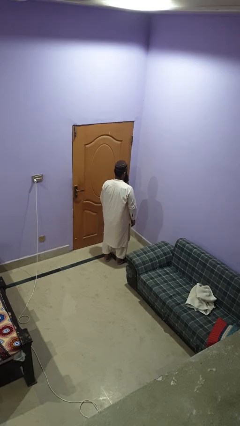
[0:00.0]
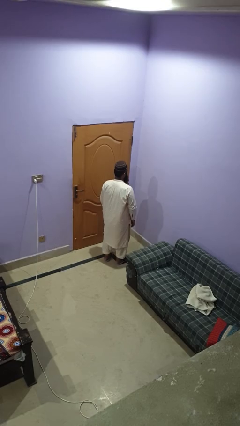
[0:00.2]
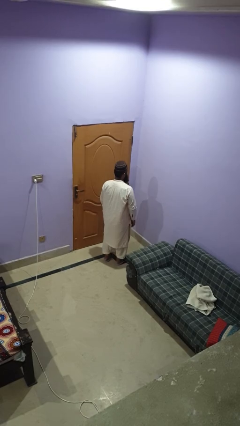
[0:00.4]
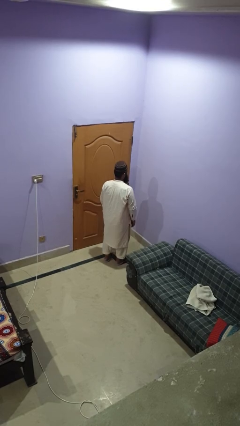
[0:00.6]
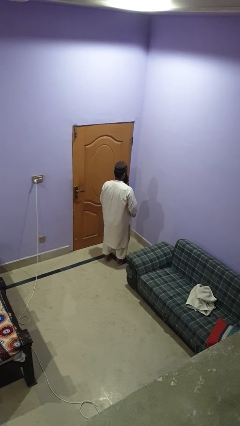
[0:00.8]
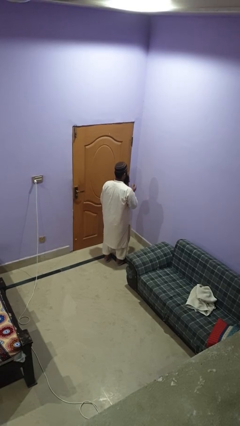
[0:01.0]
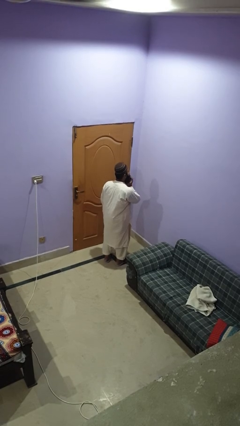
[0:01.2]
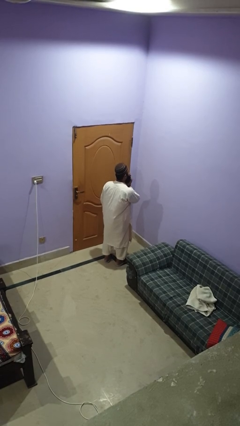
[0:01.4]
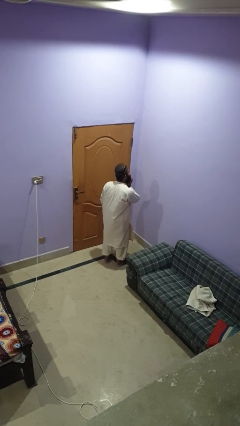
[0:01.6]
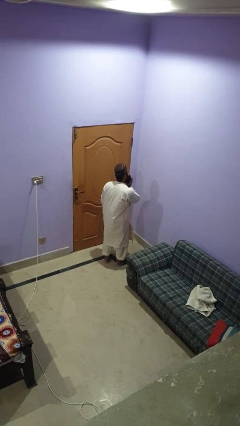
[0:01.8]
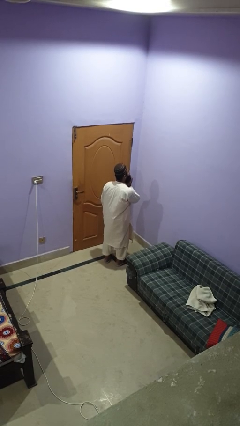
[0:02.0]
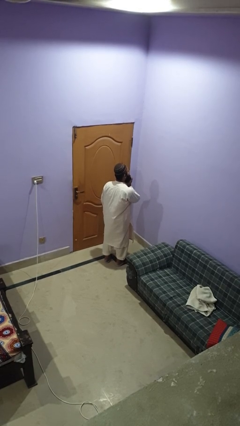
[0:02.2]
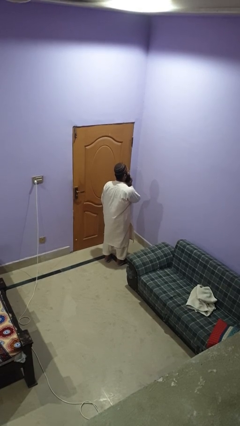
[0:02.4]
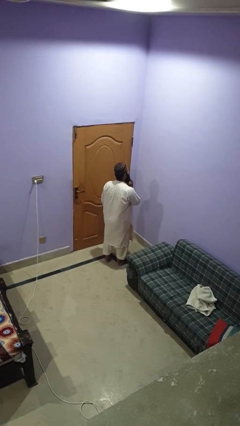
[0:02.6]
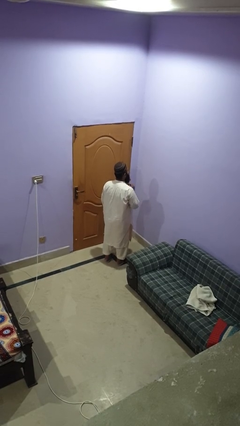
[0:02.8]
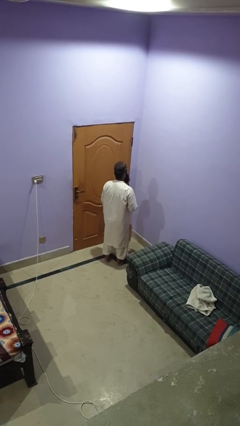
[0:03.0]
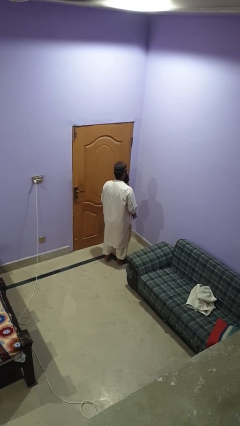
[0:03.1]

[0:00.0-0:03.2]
person strokes chin

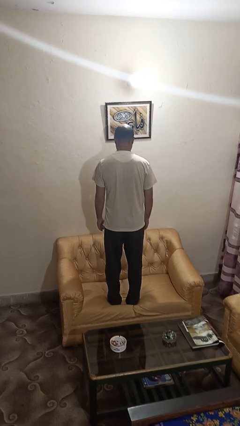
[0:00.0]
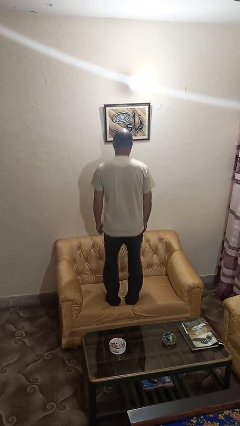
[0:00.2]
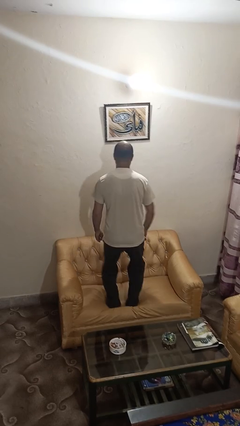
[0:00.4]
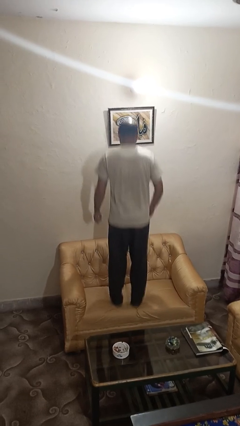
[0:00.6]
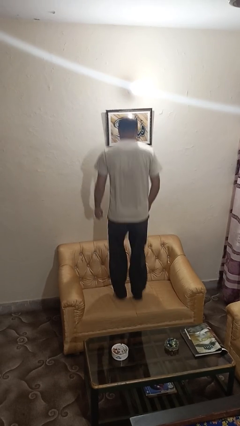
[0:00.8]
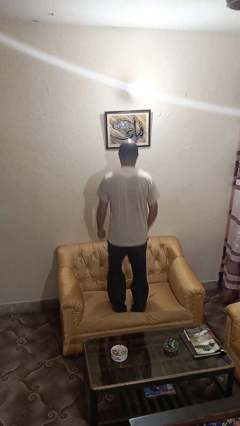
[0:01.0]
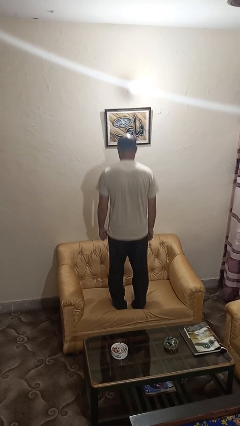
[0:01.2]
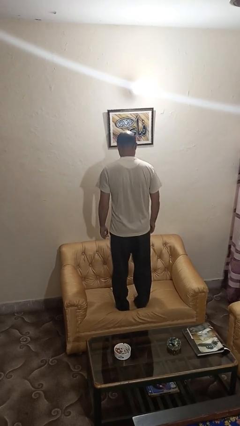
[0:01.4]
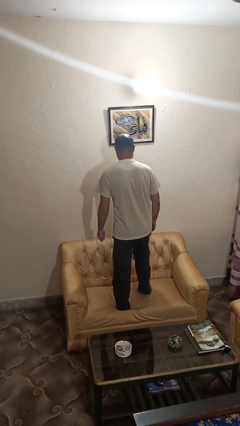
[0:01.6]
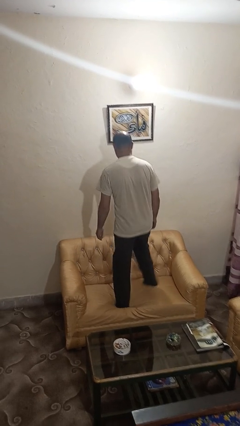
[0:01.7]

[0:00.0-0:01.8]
person jumps on couch

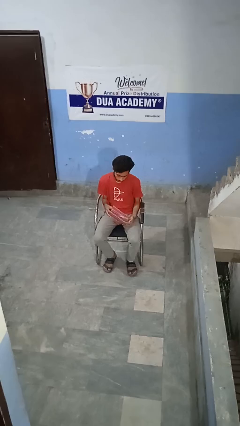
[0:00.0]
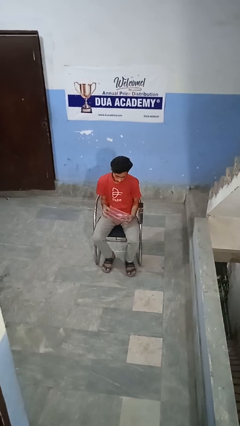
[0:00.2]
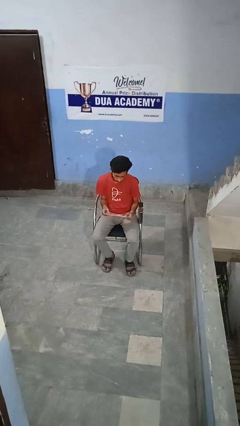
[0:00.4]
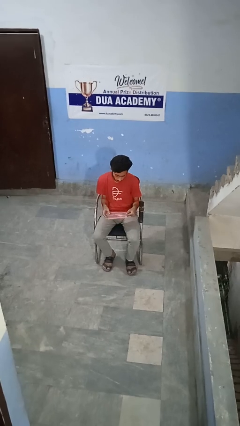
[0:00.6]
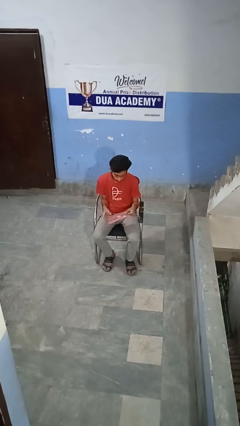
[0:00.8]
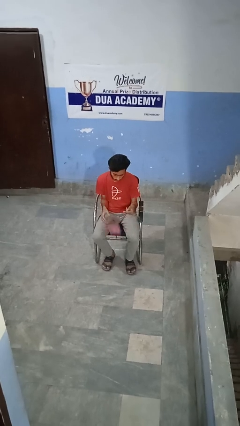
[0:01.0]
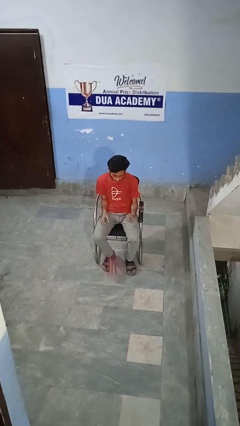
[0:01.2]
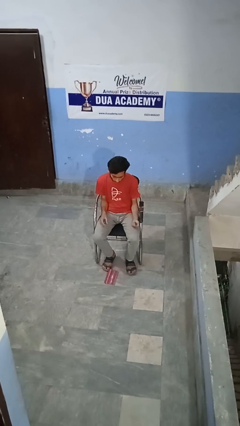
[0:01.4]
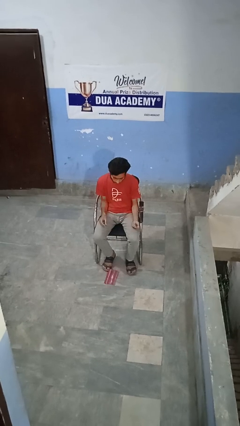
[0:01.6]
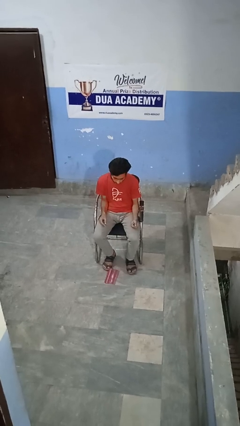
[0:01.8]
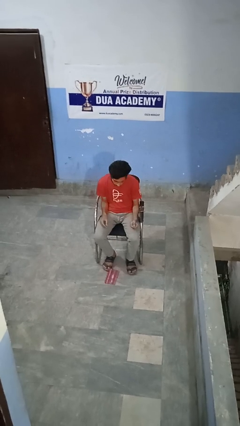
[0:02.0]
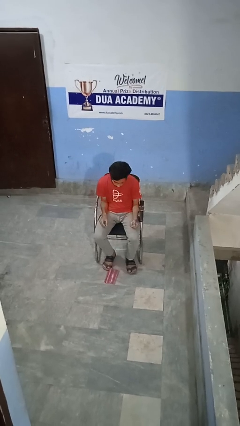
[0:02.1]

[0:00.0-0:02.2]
person drops object

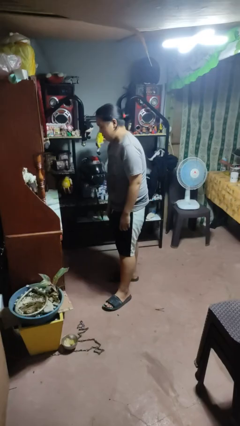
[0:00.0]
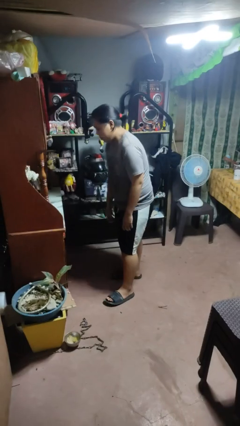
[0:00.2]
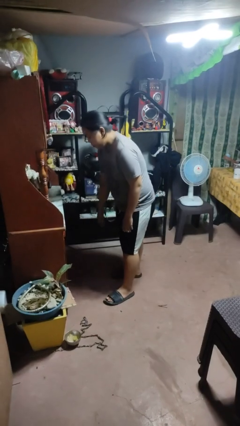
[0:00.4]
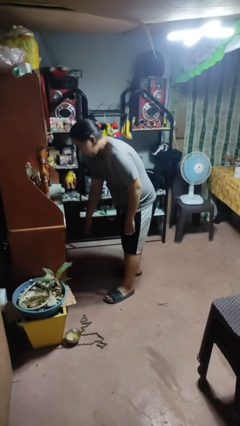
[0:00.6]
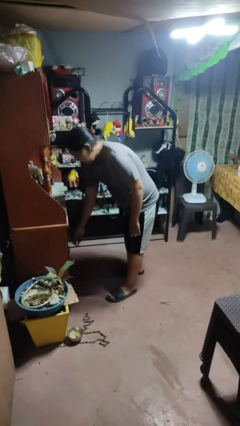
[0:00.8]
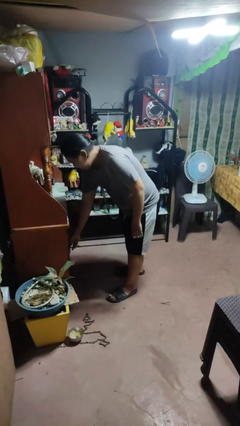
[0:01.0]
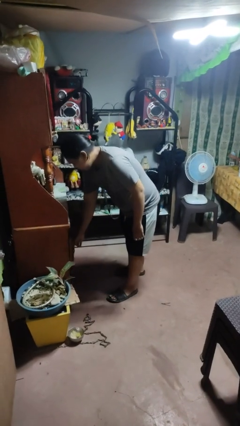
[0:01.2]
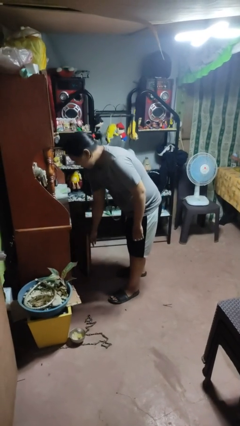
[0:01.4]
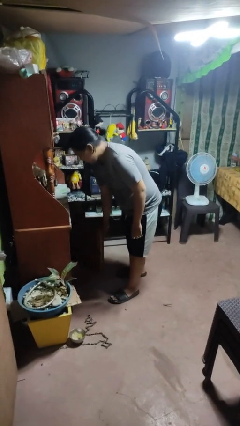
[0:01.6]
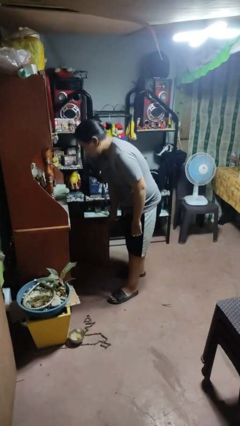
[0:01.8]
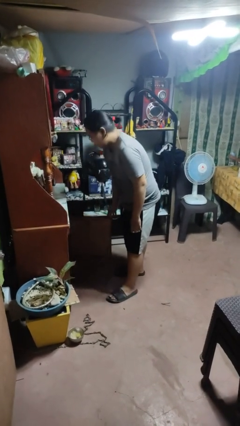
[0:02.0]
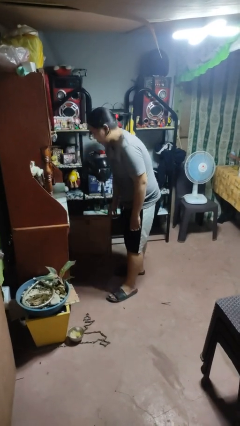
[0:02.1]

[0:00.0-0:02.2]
person opens cabinet

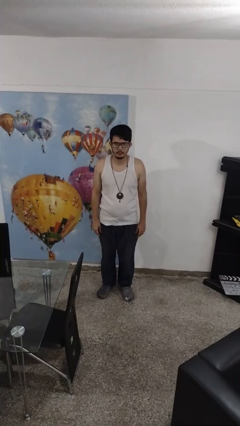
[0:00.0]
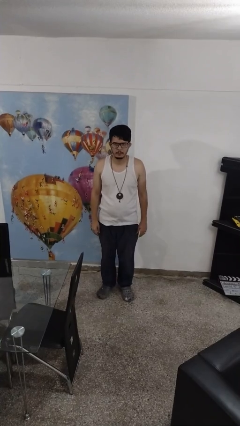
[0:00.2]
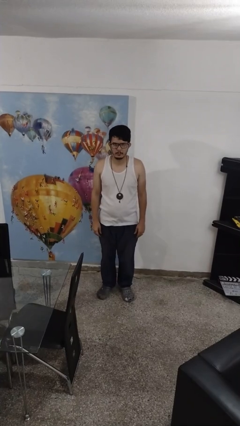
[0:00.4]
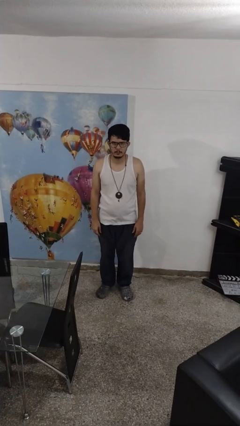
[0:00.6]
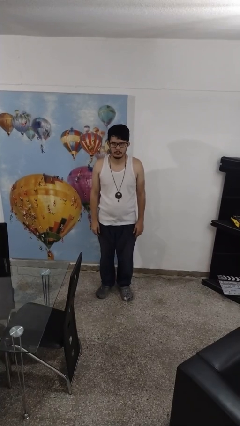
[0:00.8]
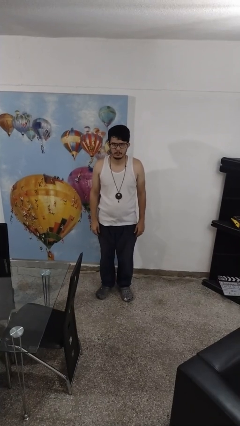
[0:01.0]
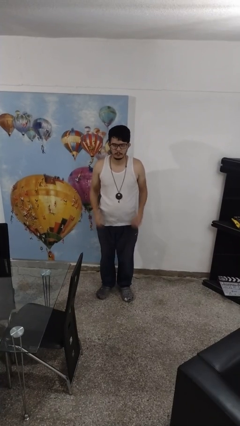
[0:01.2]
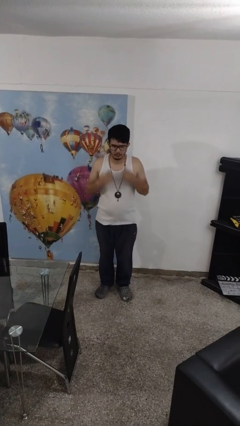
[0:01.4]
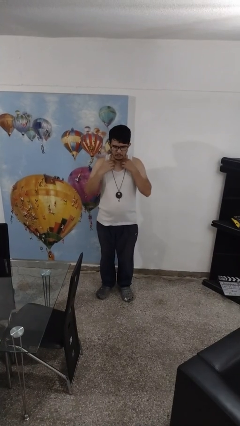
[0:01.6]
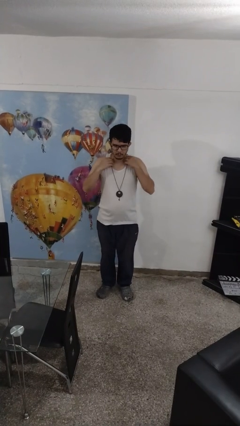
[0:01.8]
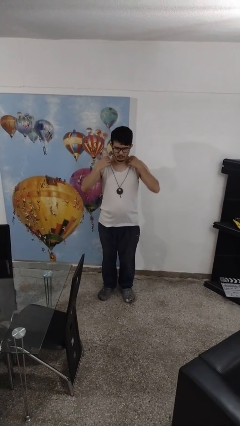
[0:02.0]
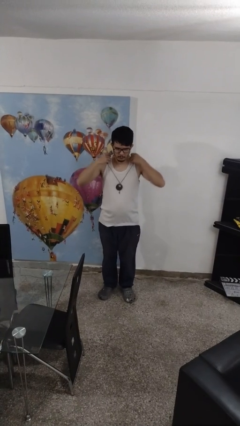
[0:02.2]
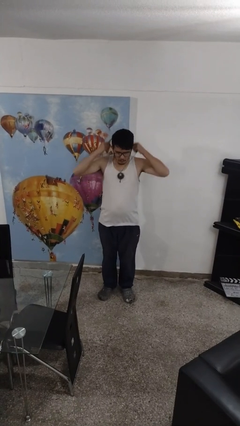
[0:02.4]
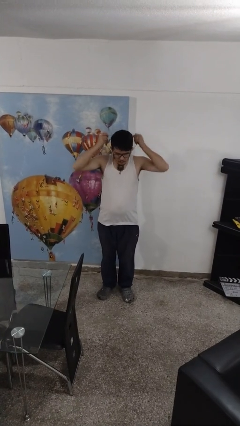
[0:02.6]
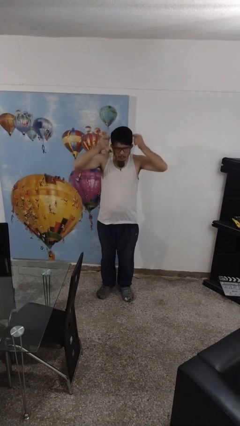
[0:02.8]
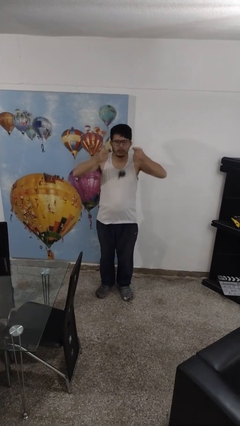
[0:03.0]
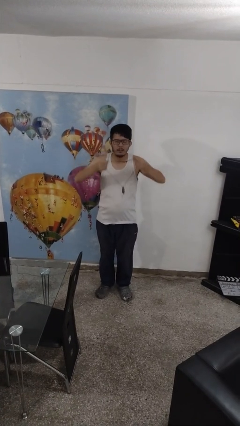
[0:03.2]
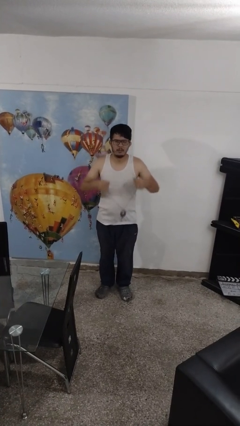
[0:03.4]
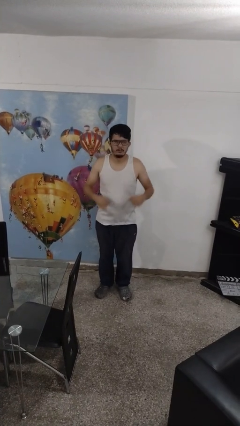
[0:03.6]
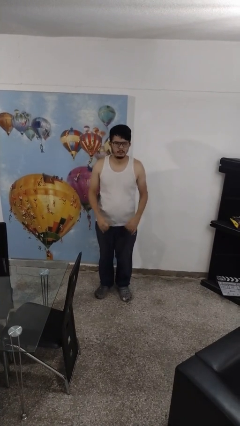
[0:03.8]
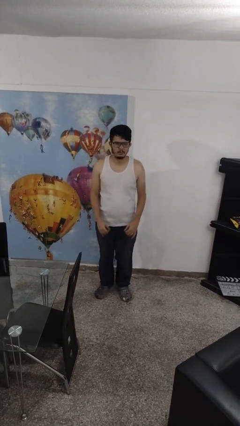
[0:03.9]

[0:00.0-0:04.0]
person takes off necklace

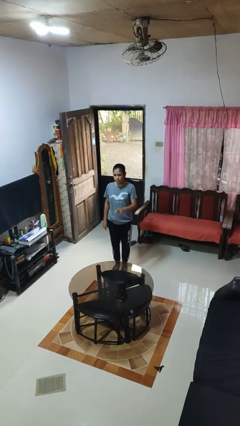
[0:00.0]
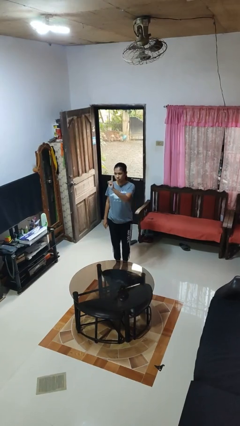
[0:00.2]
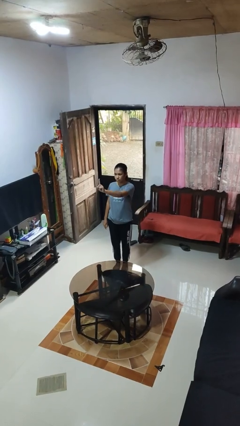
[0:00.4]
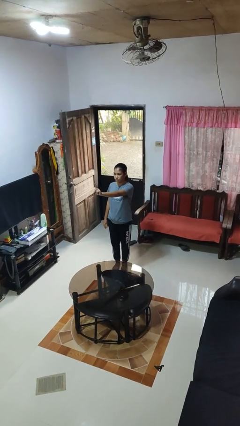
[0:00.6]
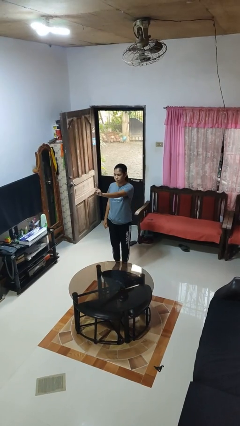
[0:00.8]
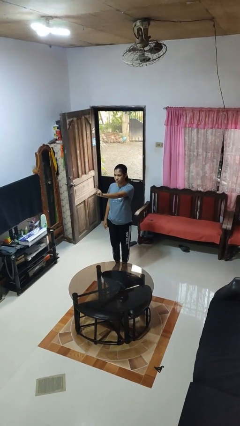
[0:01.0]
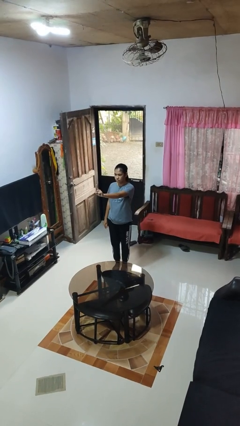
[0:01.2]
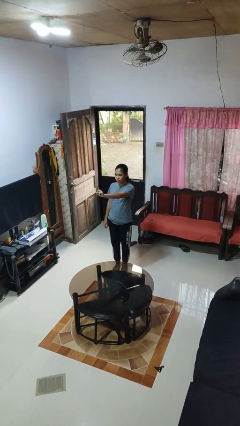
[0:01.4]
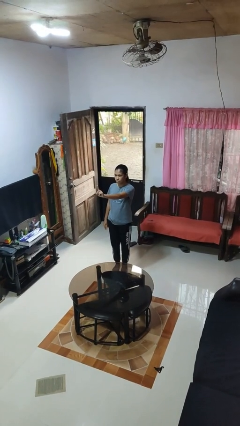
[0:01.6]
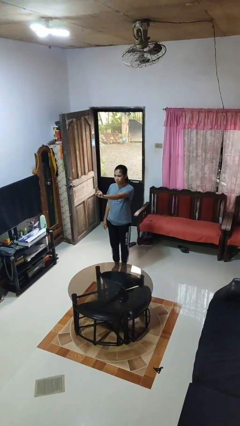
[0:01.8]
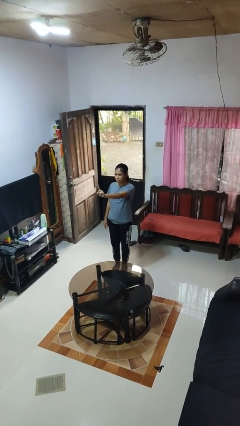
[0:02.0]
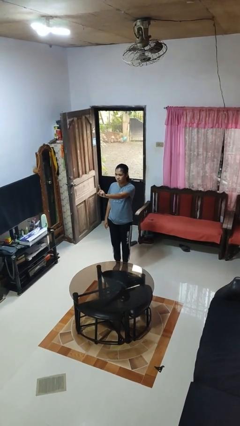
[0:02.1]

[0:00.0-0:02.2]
person gestures number one

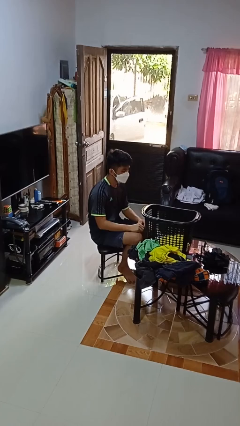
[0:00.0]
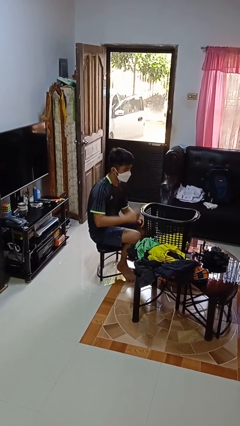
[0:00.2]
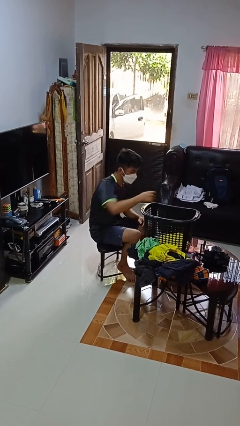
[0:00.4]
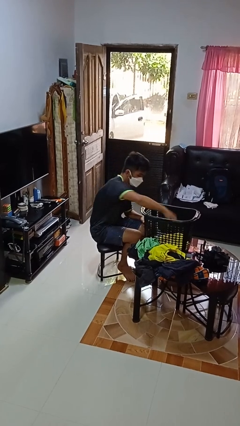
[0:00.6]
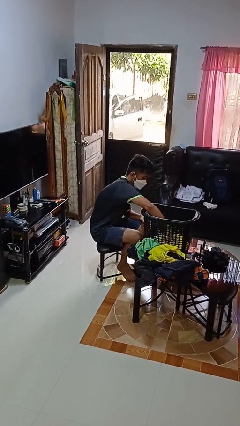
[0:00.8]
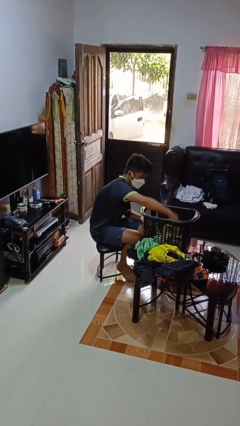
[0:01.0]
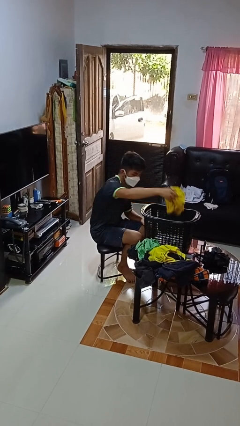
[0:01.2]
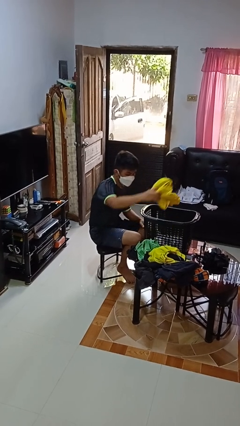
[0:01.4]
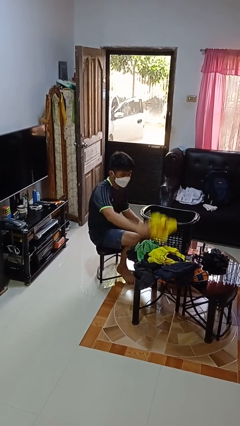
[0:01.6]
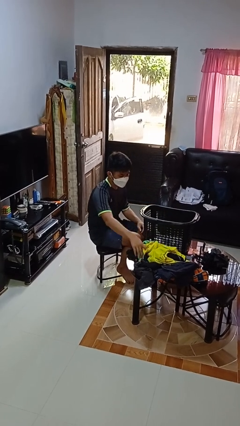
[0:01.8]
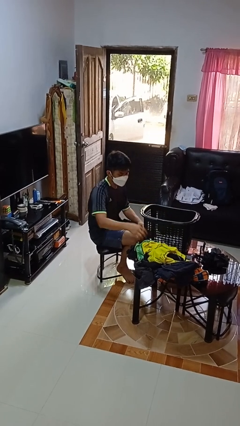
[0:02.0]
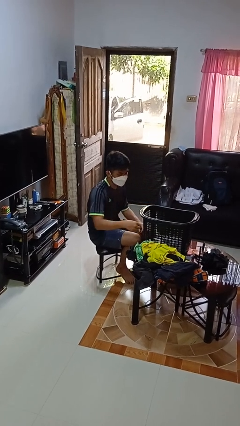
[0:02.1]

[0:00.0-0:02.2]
person takes object from basket
